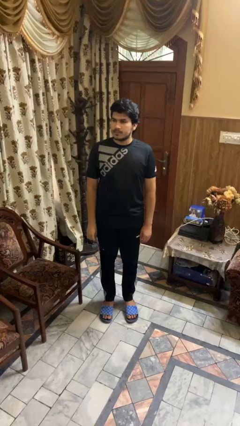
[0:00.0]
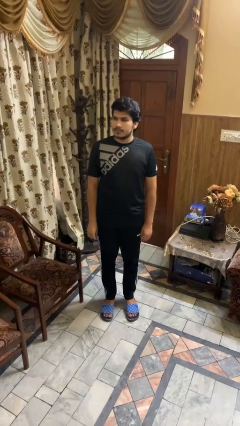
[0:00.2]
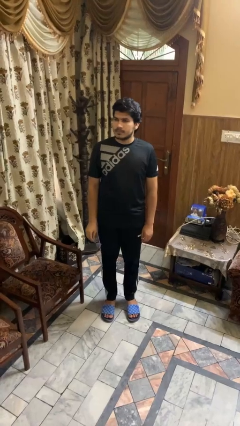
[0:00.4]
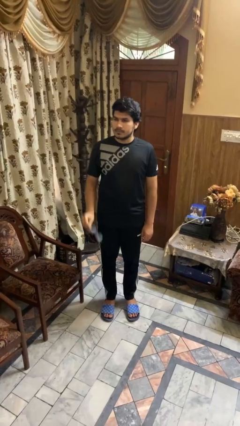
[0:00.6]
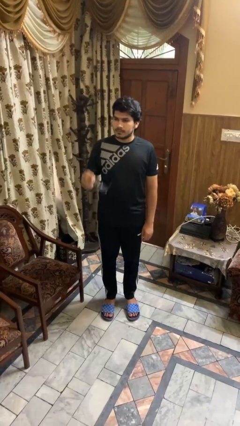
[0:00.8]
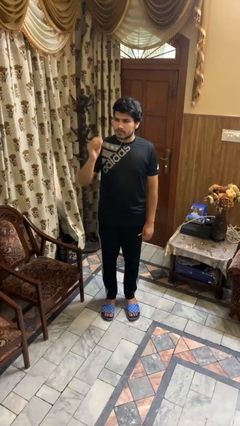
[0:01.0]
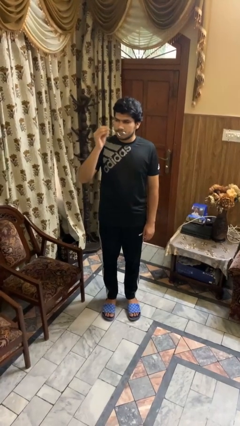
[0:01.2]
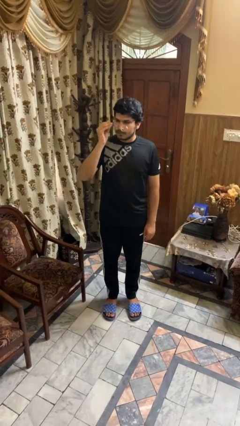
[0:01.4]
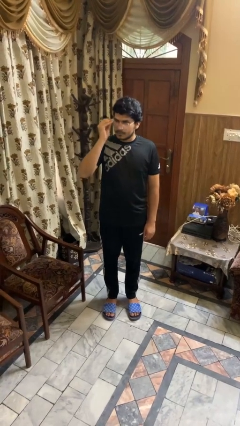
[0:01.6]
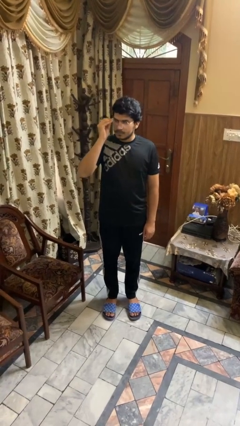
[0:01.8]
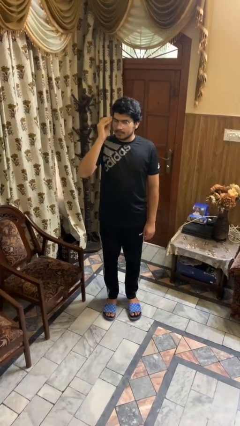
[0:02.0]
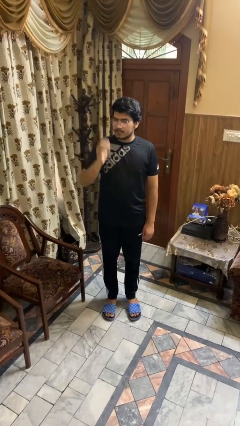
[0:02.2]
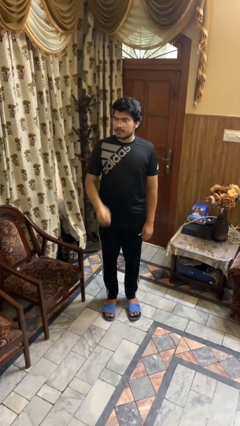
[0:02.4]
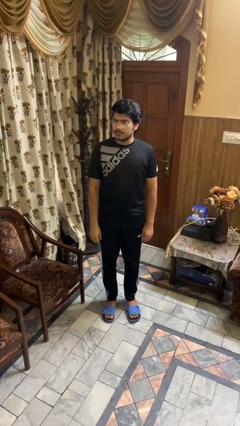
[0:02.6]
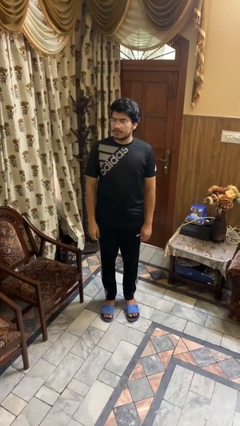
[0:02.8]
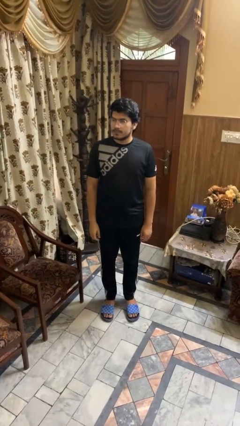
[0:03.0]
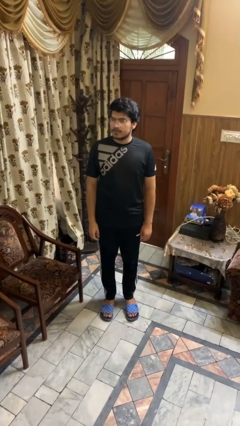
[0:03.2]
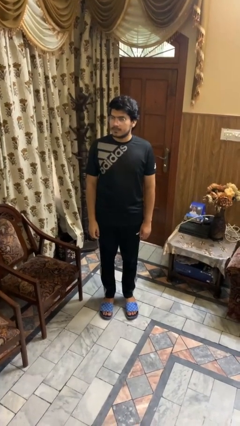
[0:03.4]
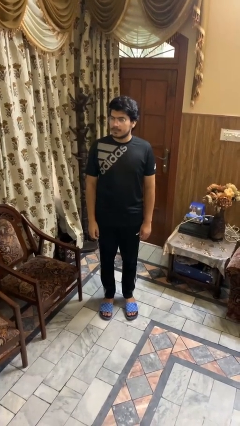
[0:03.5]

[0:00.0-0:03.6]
person puts on glasses

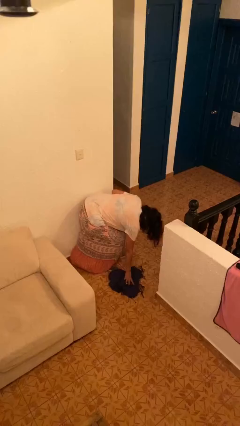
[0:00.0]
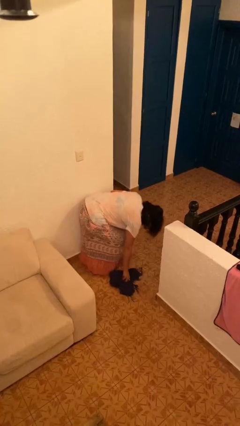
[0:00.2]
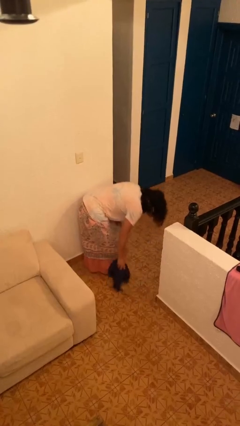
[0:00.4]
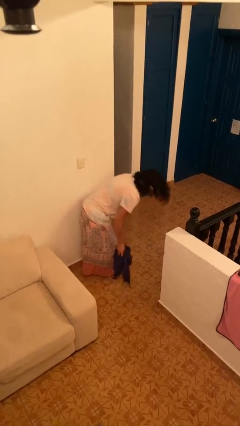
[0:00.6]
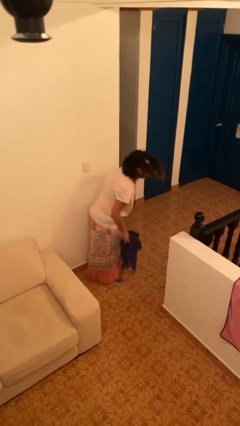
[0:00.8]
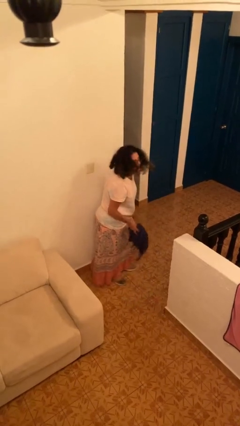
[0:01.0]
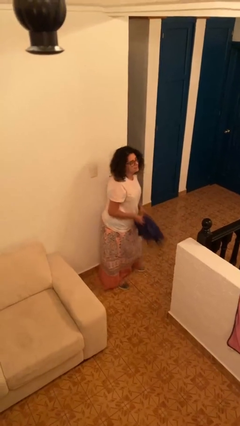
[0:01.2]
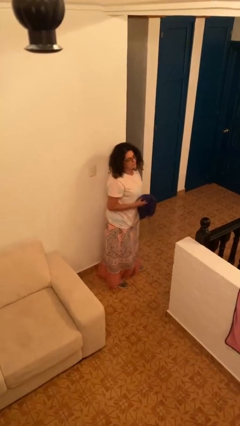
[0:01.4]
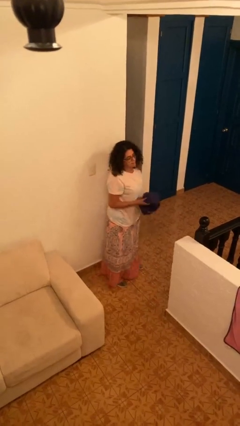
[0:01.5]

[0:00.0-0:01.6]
person picks up object from floor

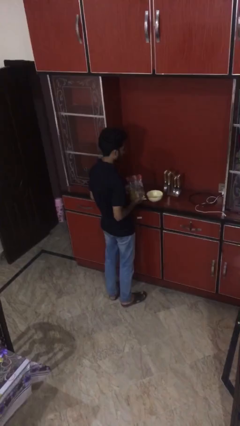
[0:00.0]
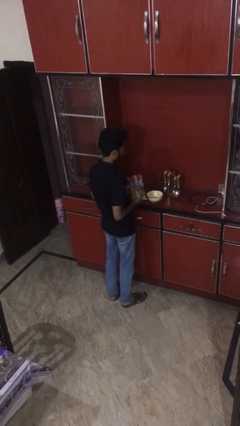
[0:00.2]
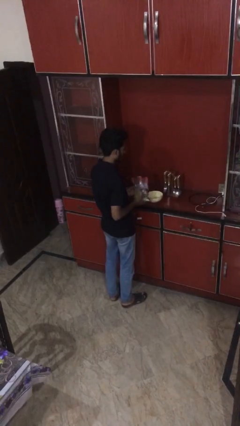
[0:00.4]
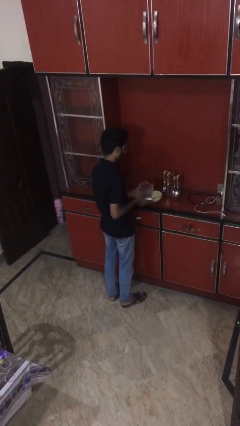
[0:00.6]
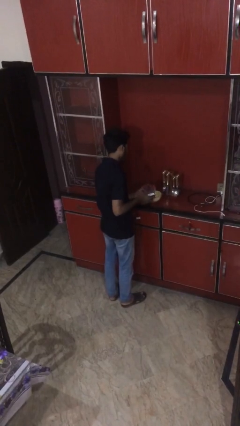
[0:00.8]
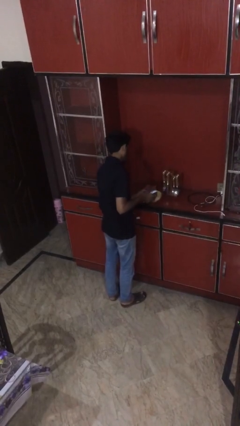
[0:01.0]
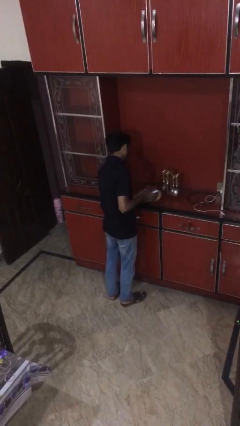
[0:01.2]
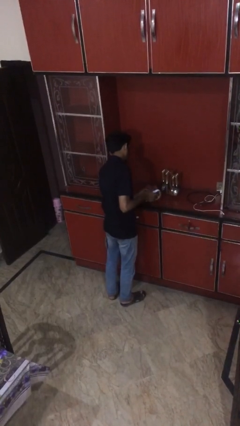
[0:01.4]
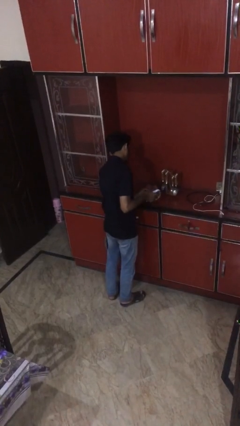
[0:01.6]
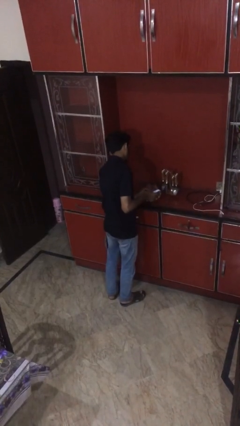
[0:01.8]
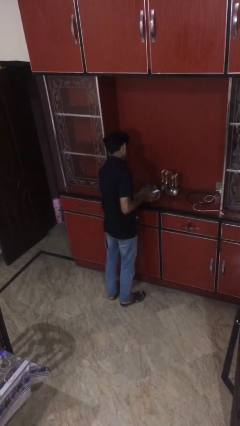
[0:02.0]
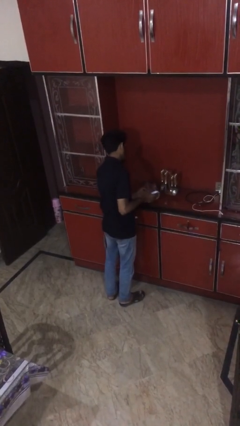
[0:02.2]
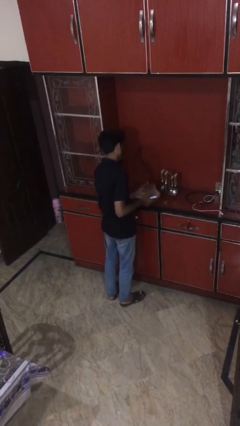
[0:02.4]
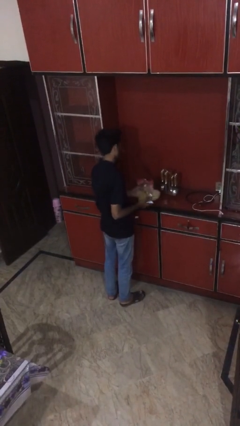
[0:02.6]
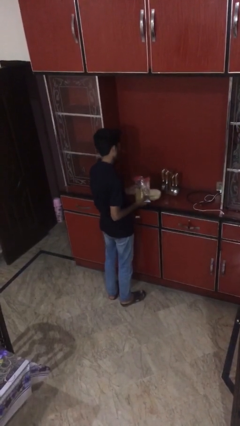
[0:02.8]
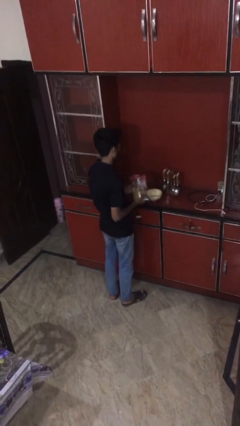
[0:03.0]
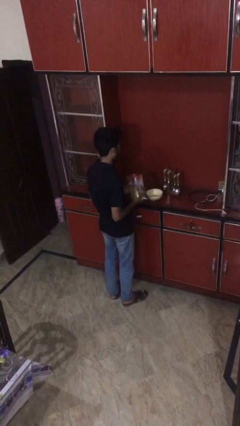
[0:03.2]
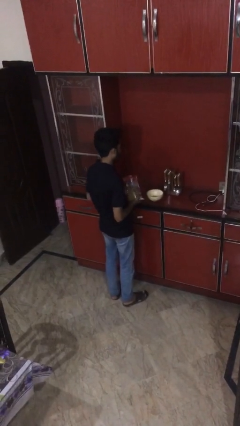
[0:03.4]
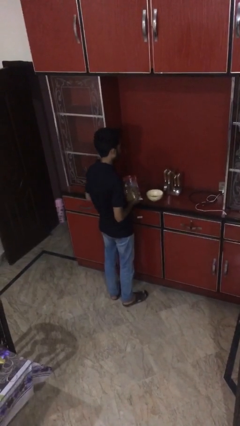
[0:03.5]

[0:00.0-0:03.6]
person pours into bowl

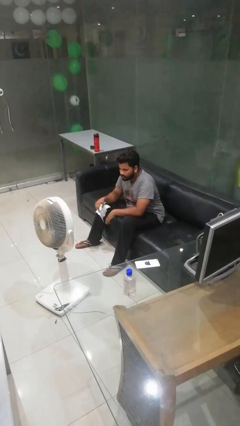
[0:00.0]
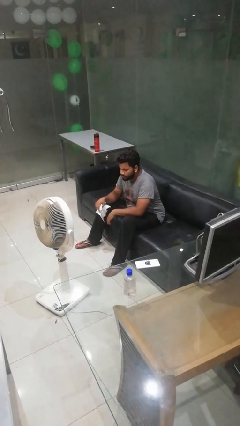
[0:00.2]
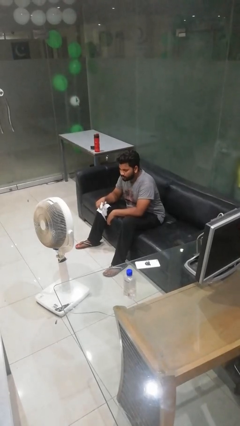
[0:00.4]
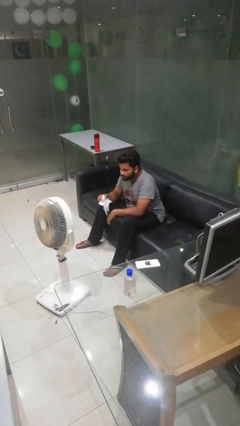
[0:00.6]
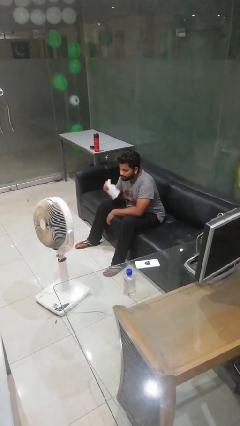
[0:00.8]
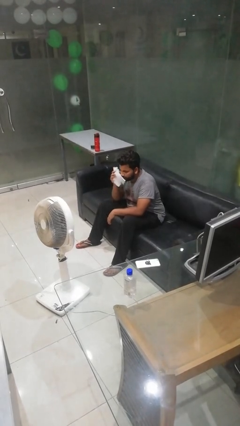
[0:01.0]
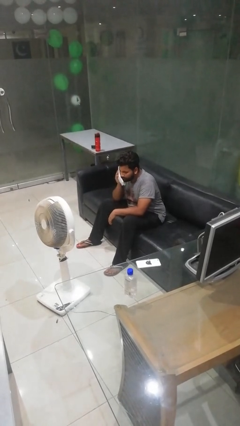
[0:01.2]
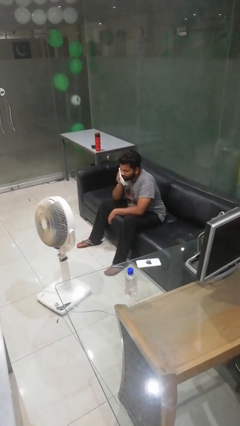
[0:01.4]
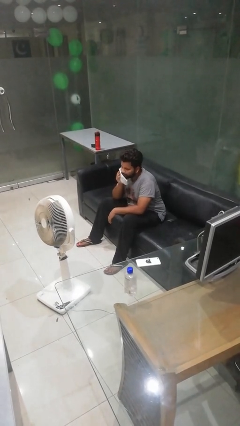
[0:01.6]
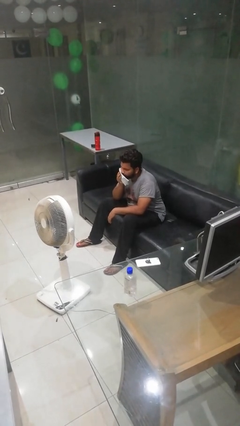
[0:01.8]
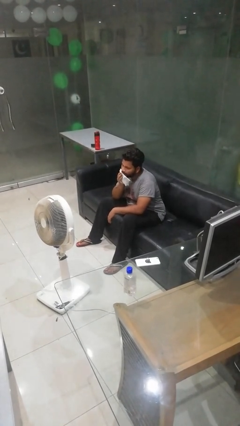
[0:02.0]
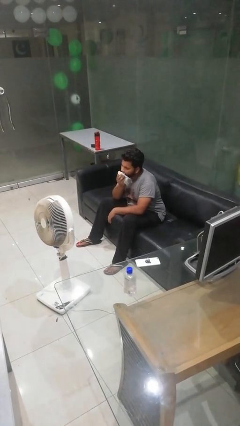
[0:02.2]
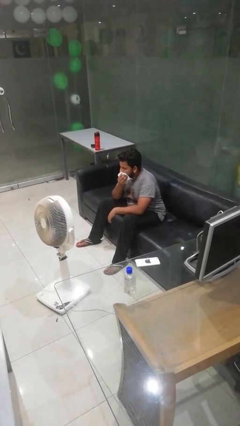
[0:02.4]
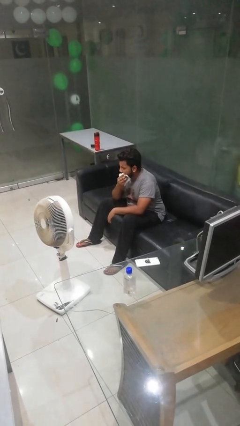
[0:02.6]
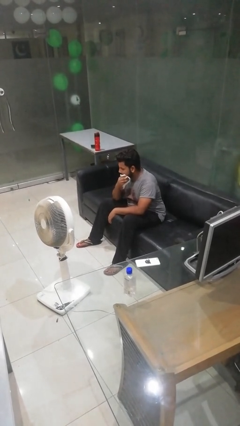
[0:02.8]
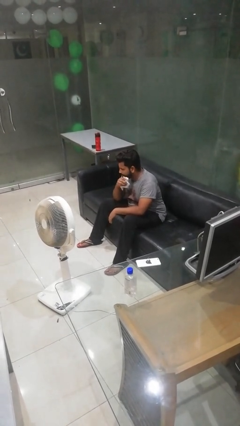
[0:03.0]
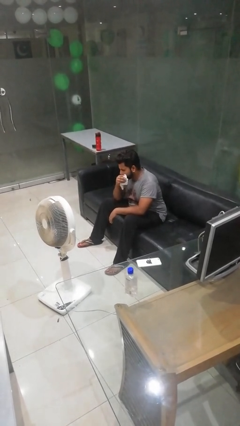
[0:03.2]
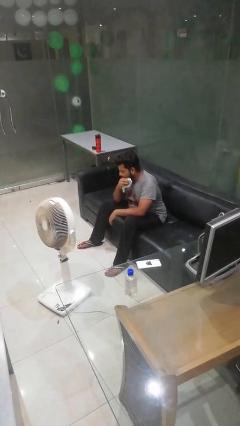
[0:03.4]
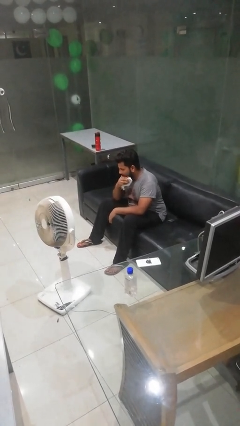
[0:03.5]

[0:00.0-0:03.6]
person wipes mouth with napkin

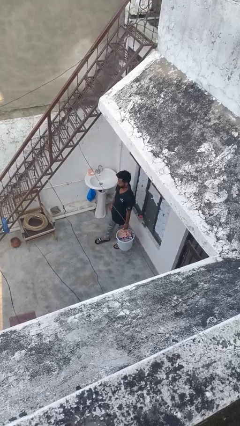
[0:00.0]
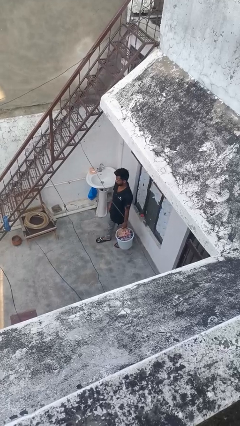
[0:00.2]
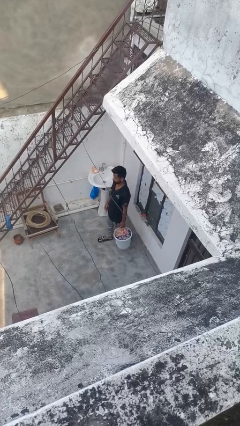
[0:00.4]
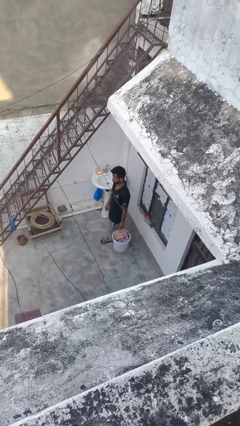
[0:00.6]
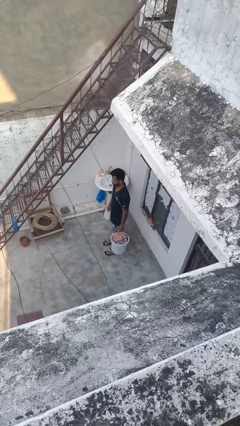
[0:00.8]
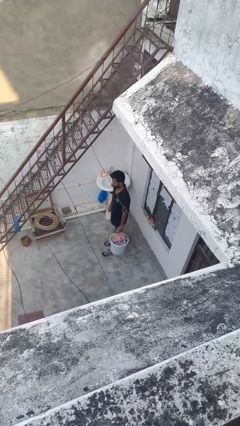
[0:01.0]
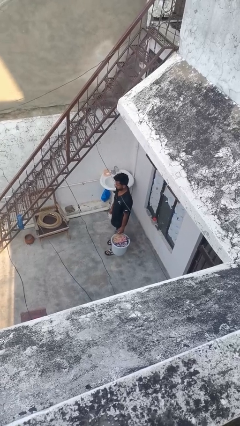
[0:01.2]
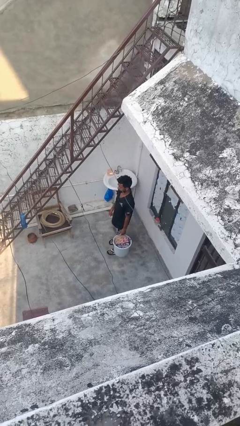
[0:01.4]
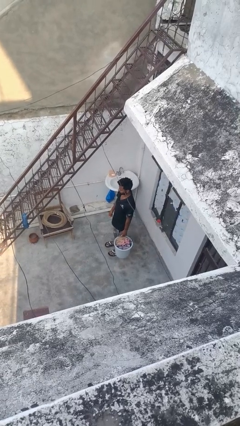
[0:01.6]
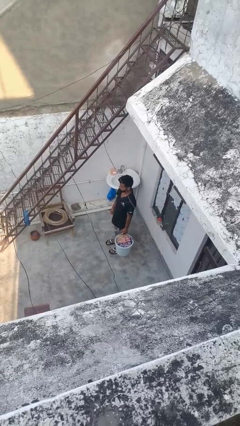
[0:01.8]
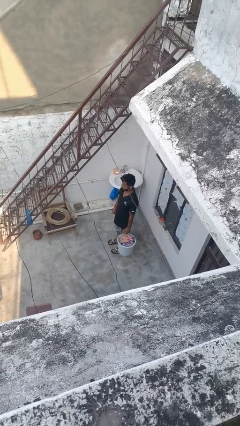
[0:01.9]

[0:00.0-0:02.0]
person carries laundry basket

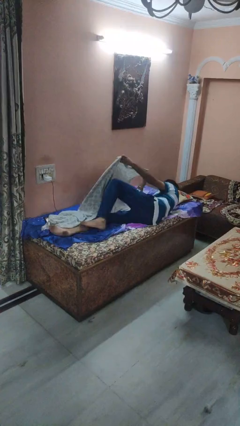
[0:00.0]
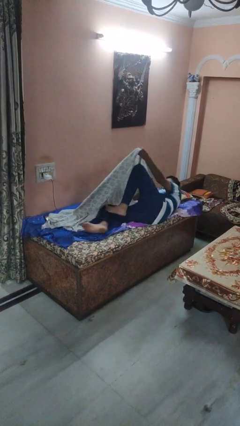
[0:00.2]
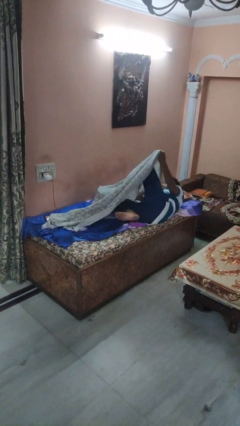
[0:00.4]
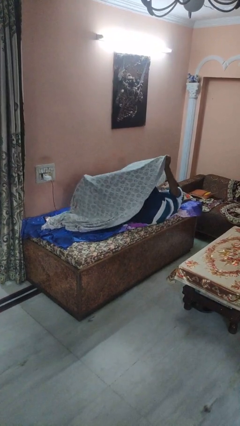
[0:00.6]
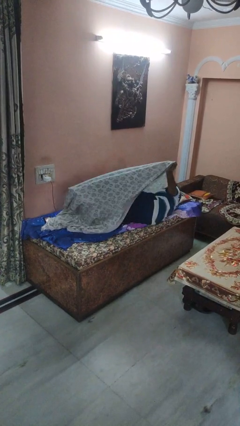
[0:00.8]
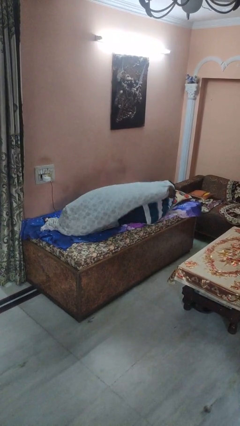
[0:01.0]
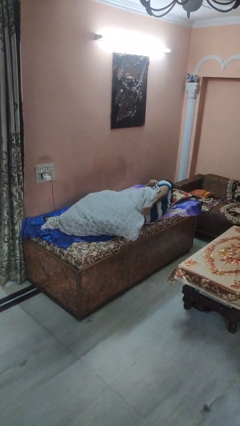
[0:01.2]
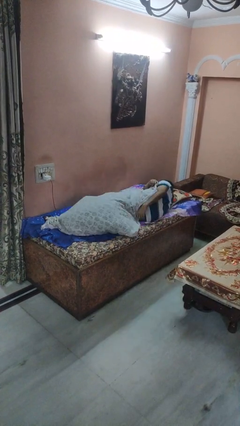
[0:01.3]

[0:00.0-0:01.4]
person covers with bedsheets

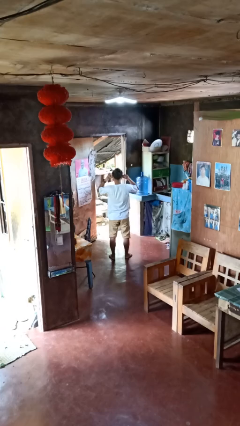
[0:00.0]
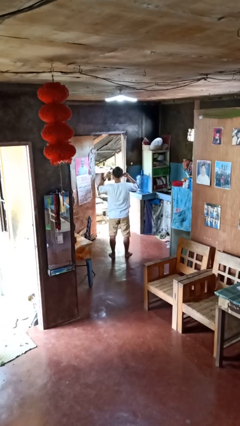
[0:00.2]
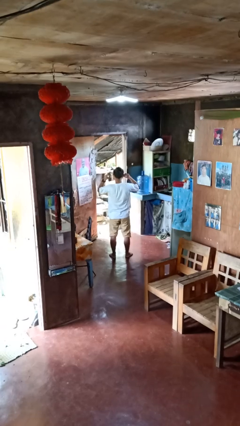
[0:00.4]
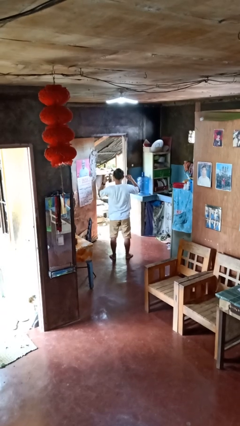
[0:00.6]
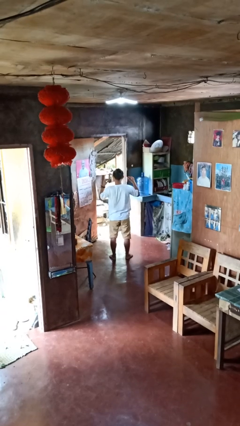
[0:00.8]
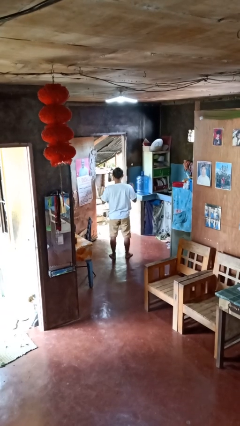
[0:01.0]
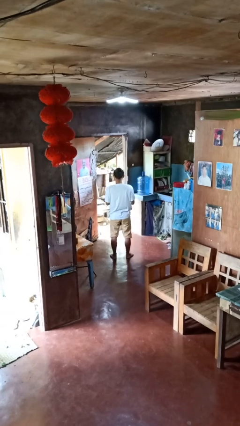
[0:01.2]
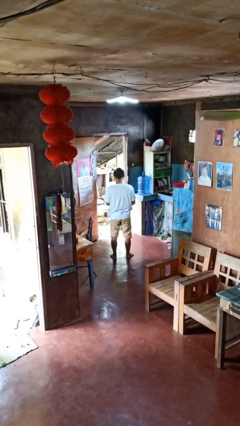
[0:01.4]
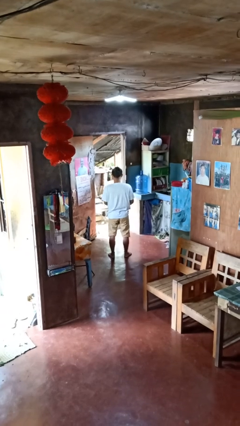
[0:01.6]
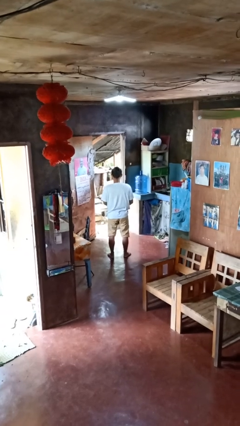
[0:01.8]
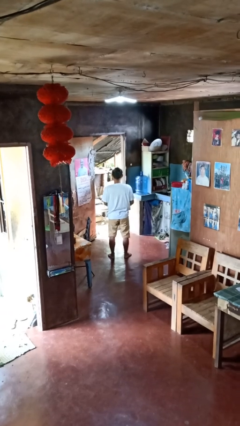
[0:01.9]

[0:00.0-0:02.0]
person takes off headphones
